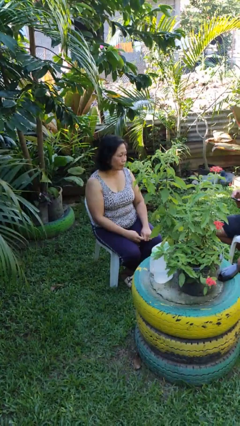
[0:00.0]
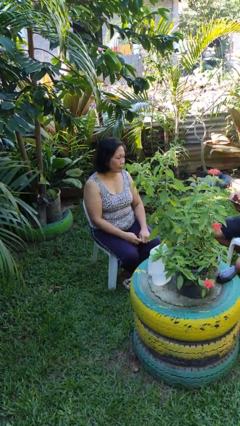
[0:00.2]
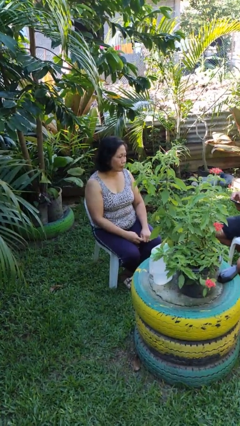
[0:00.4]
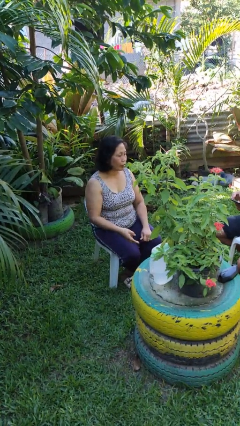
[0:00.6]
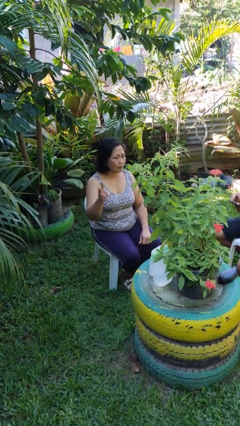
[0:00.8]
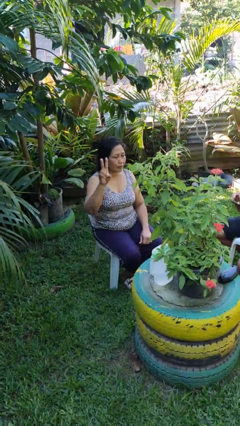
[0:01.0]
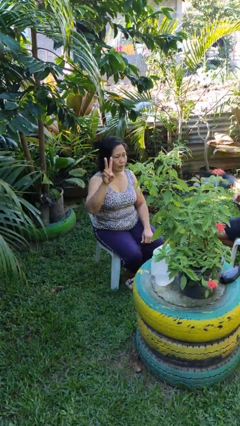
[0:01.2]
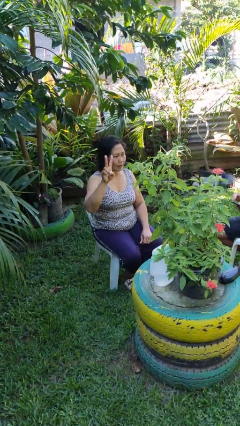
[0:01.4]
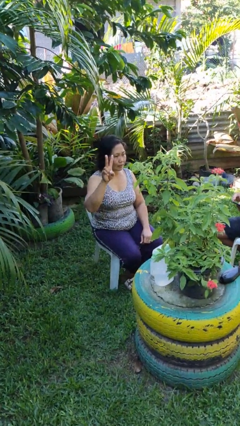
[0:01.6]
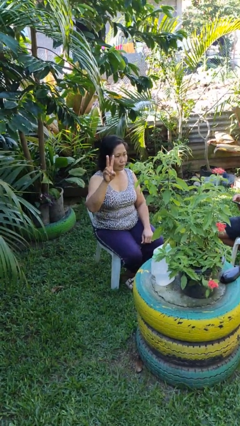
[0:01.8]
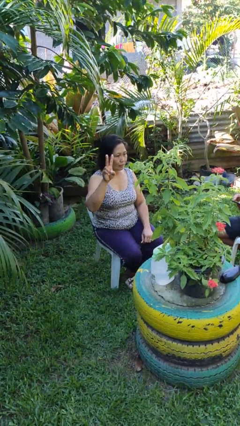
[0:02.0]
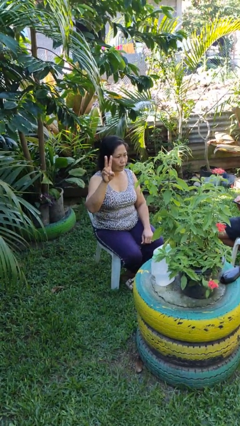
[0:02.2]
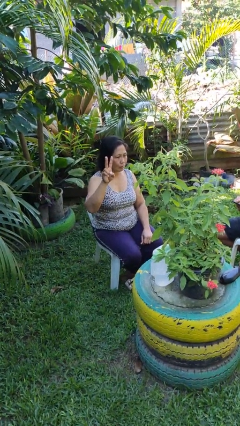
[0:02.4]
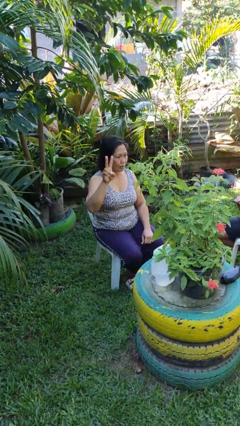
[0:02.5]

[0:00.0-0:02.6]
person gestures peace

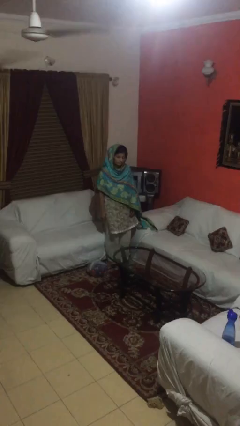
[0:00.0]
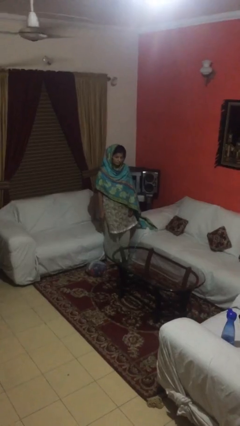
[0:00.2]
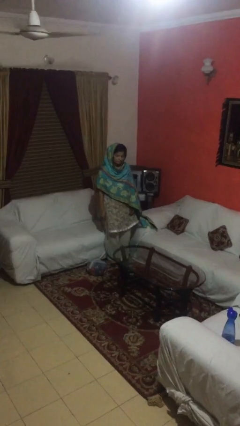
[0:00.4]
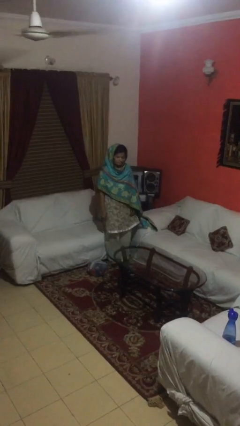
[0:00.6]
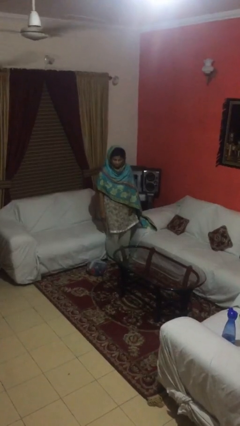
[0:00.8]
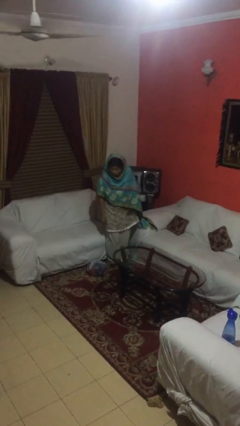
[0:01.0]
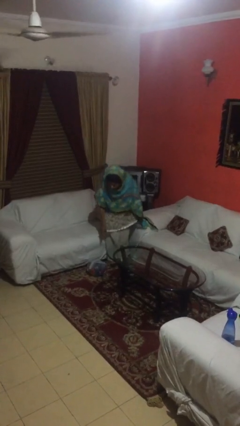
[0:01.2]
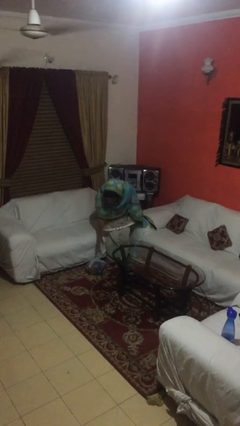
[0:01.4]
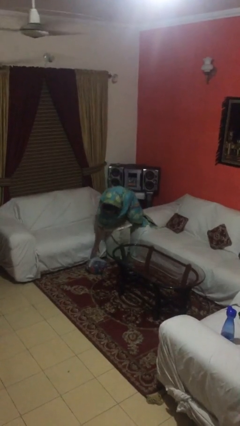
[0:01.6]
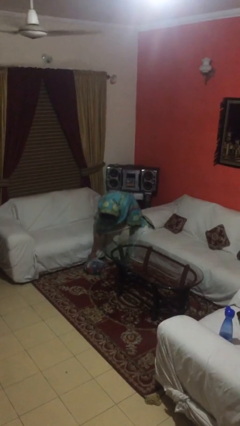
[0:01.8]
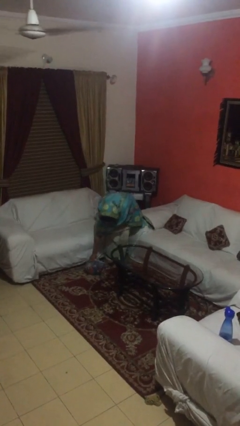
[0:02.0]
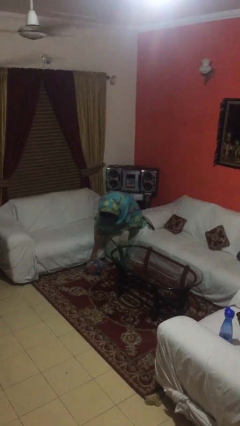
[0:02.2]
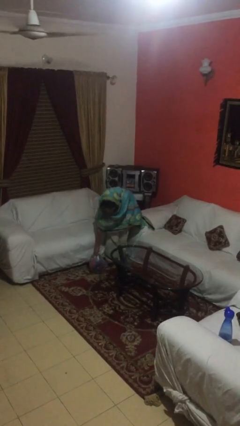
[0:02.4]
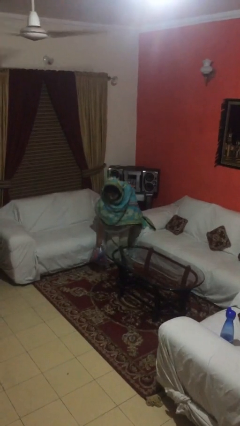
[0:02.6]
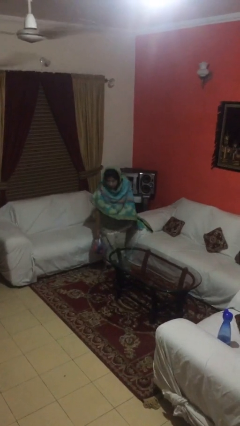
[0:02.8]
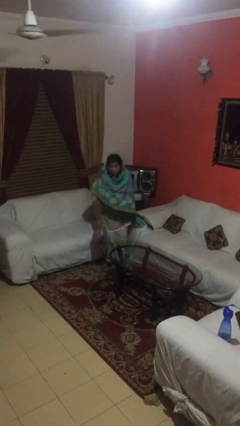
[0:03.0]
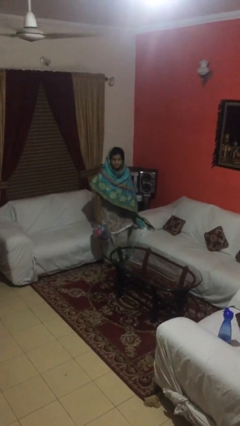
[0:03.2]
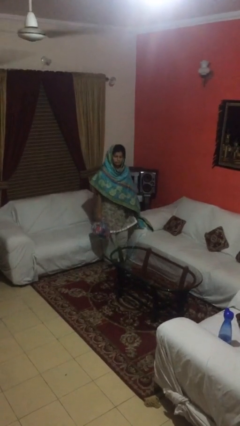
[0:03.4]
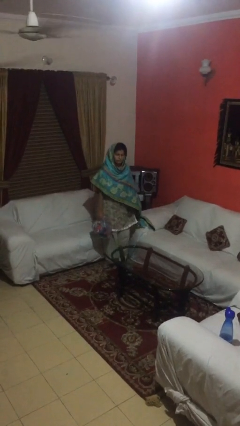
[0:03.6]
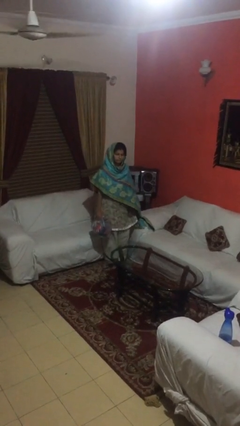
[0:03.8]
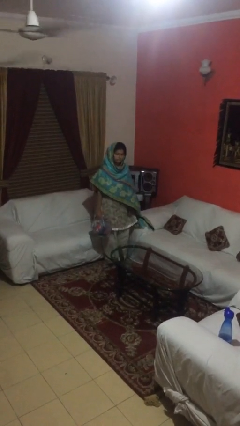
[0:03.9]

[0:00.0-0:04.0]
person picks up object from floor

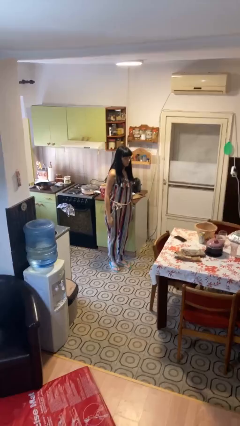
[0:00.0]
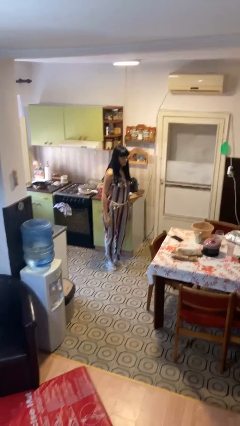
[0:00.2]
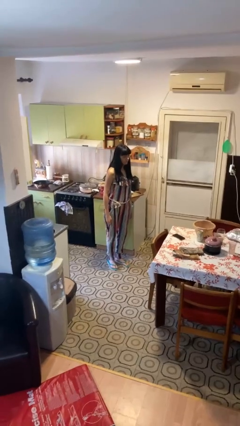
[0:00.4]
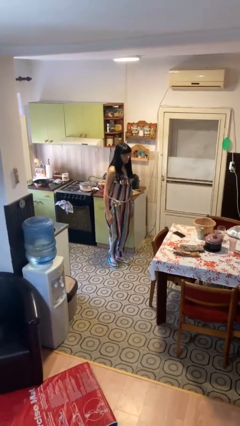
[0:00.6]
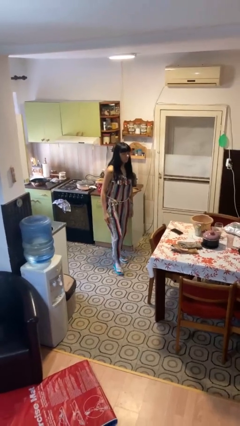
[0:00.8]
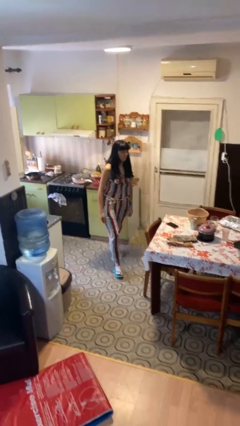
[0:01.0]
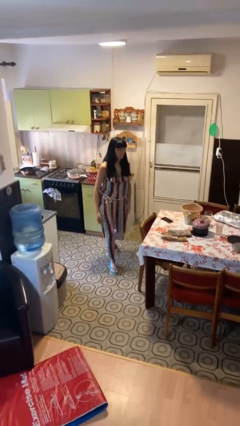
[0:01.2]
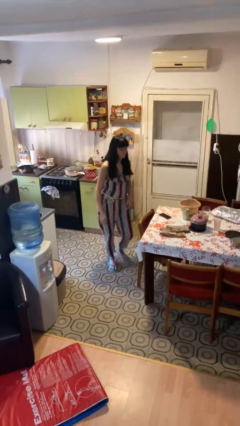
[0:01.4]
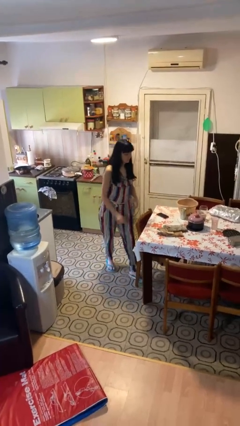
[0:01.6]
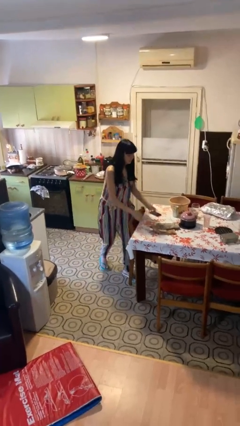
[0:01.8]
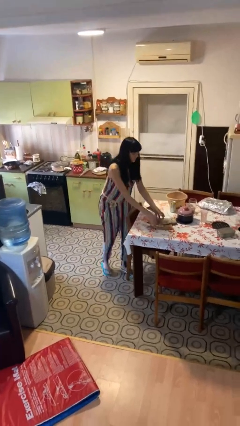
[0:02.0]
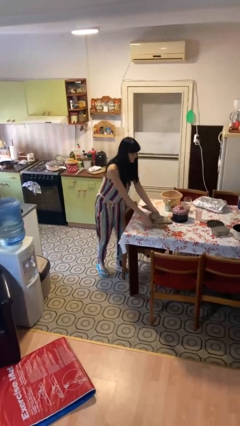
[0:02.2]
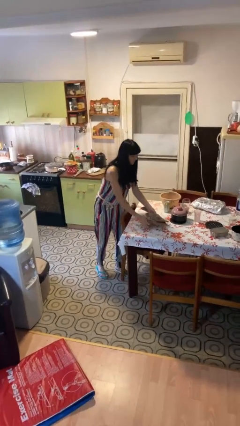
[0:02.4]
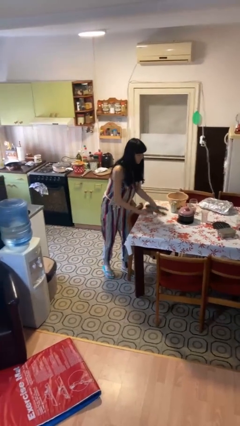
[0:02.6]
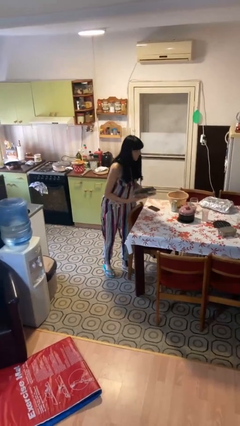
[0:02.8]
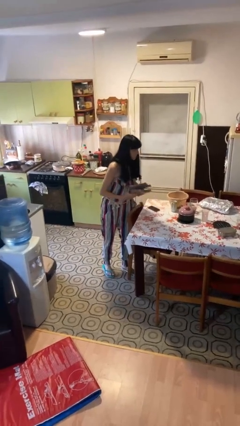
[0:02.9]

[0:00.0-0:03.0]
person picks up object from table

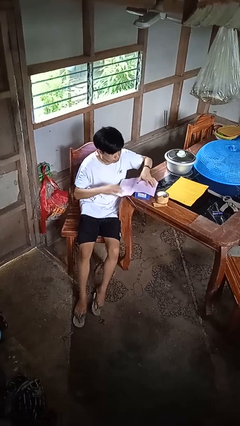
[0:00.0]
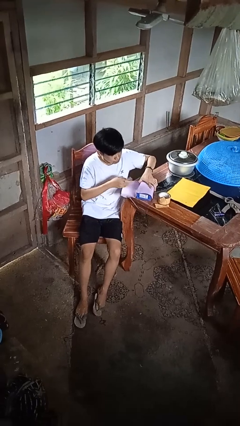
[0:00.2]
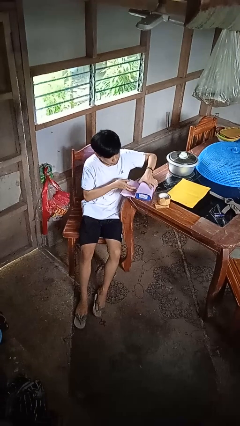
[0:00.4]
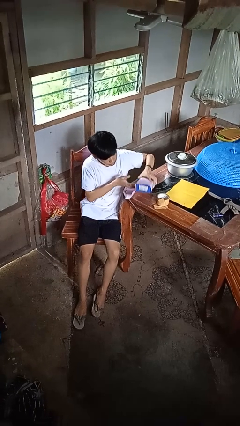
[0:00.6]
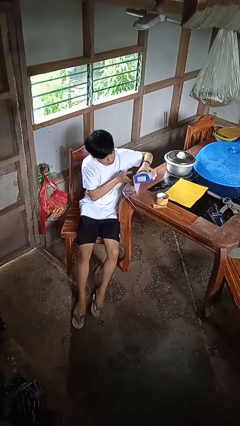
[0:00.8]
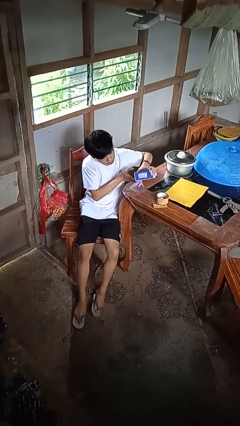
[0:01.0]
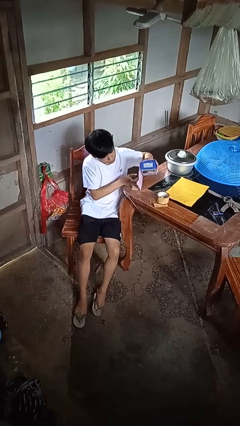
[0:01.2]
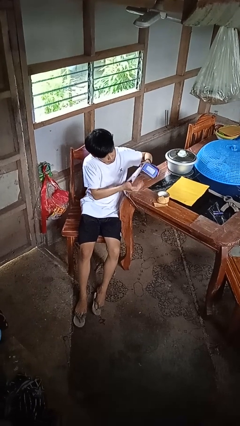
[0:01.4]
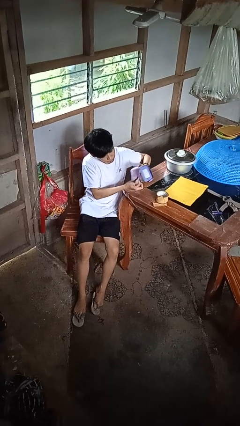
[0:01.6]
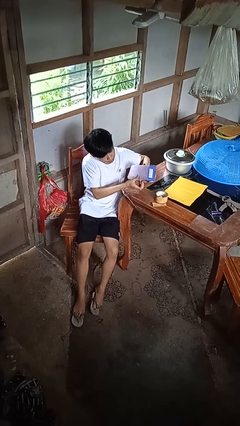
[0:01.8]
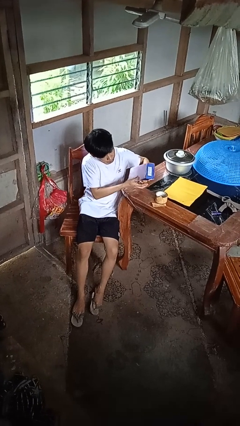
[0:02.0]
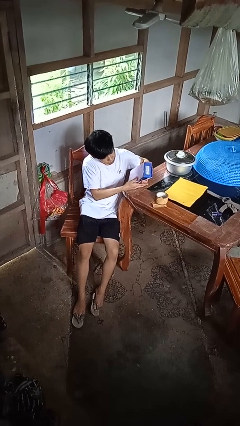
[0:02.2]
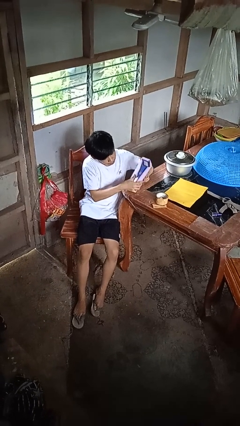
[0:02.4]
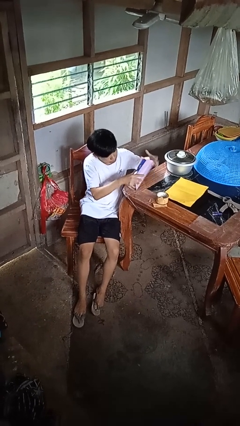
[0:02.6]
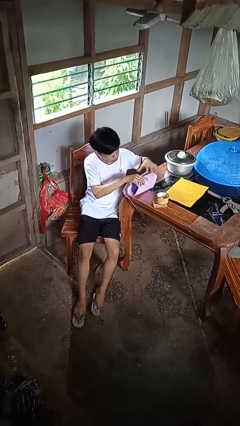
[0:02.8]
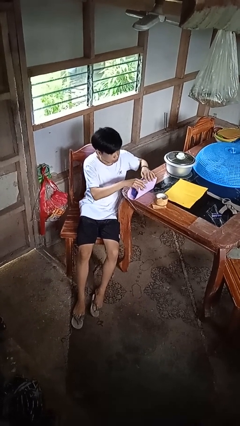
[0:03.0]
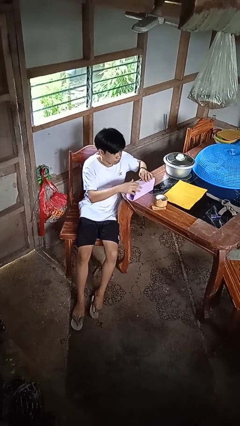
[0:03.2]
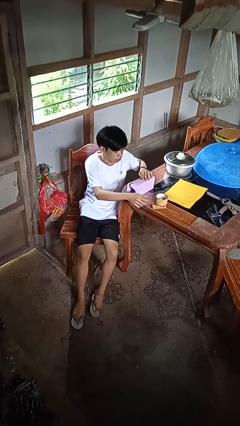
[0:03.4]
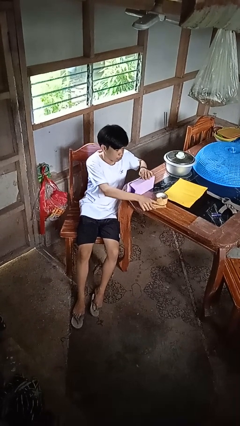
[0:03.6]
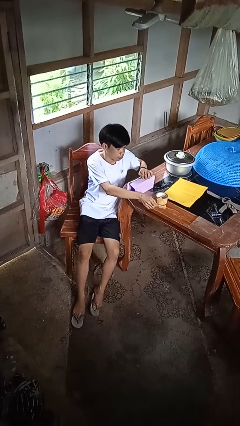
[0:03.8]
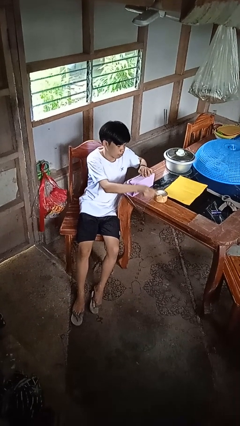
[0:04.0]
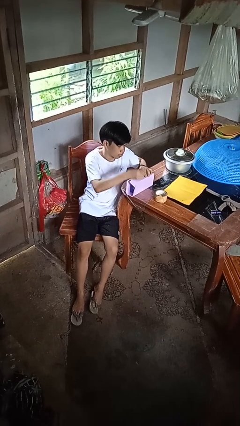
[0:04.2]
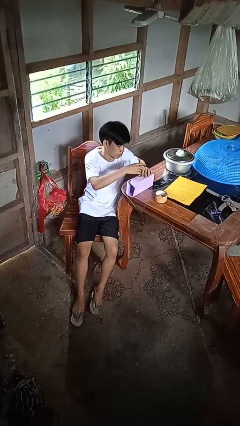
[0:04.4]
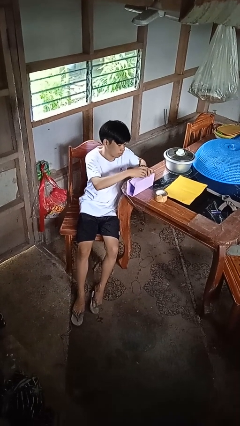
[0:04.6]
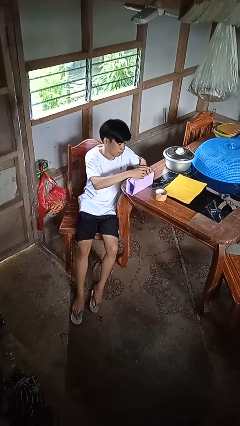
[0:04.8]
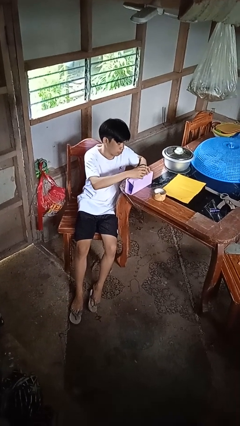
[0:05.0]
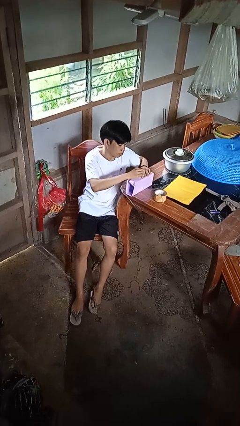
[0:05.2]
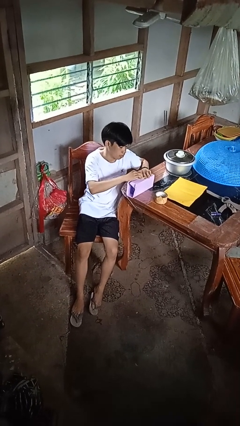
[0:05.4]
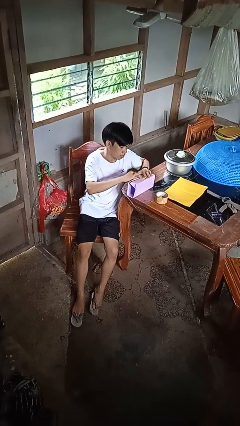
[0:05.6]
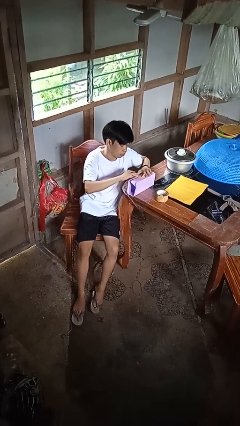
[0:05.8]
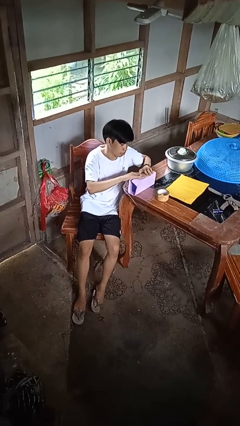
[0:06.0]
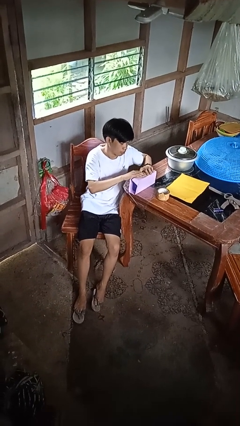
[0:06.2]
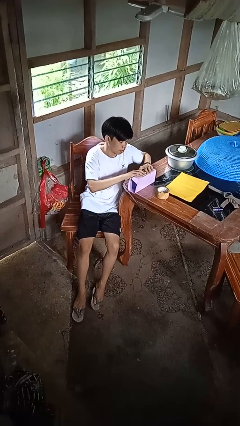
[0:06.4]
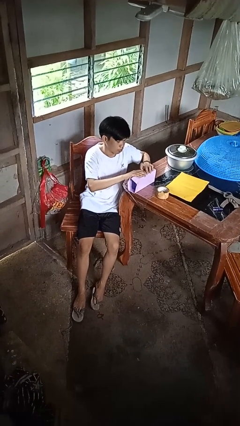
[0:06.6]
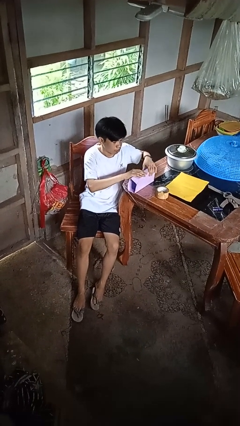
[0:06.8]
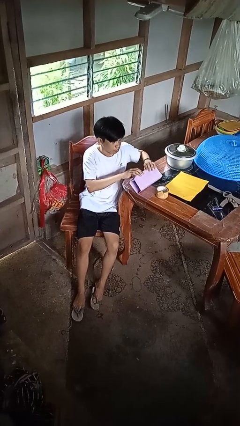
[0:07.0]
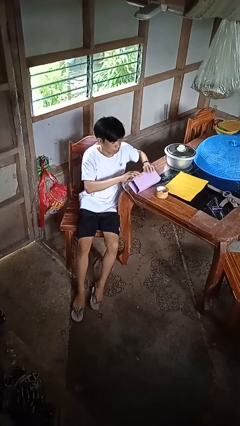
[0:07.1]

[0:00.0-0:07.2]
person wraps box

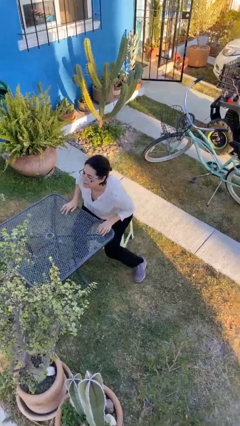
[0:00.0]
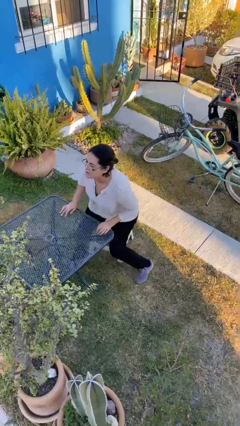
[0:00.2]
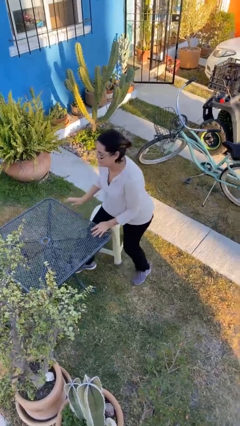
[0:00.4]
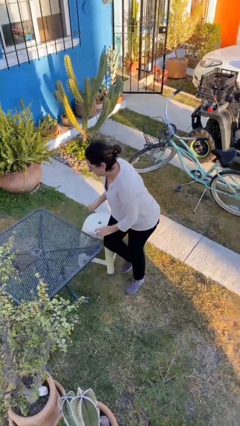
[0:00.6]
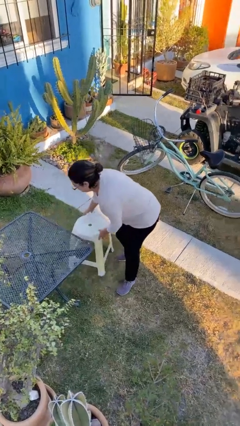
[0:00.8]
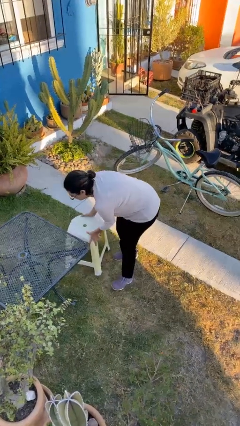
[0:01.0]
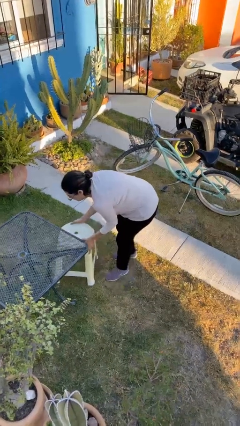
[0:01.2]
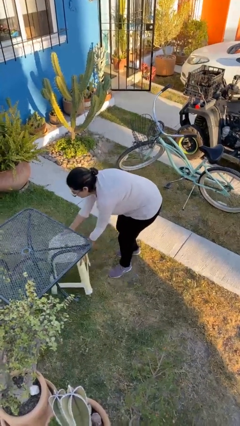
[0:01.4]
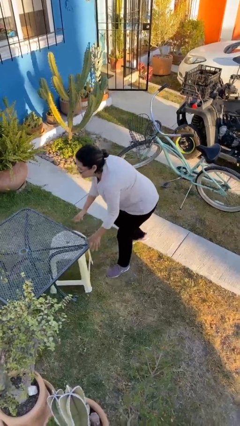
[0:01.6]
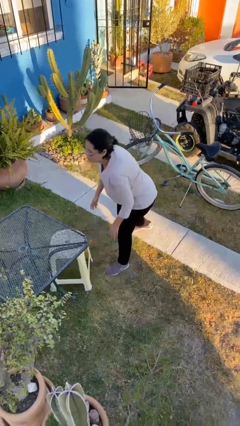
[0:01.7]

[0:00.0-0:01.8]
person stands up
